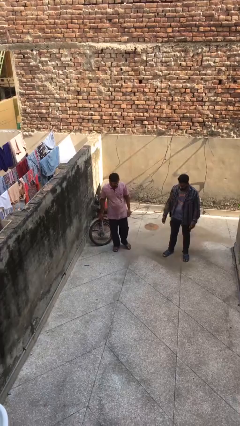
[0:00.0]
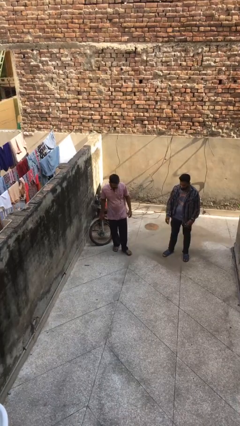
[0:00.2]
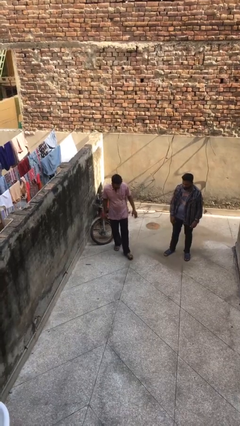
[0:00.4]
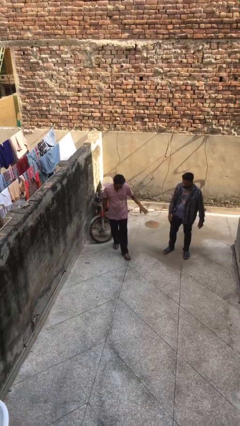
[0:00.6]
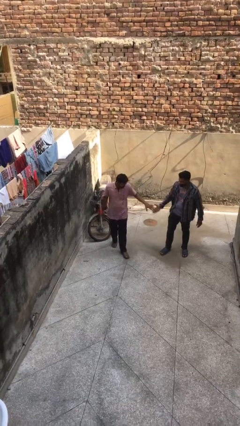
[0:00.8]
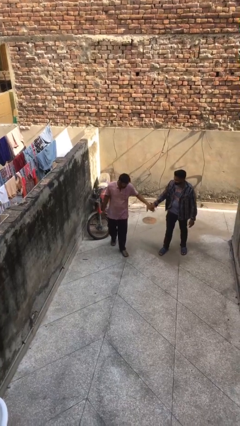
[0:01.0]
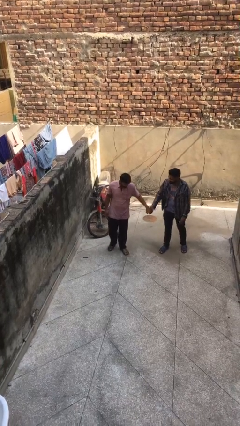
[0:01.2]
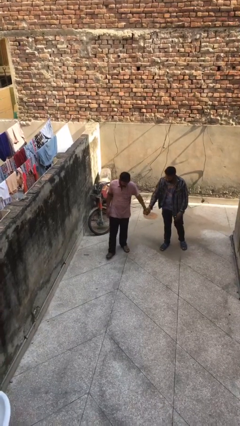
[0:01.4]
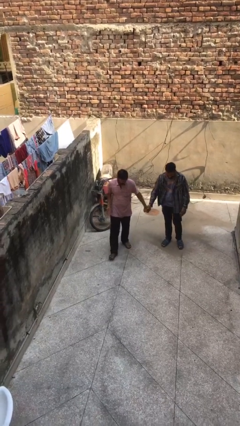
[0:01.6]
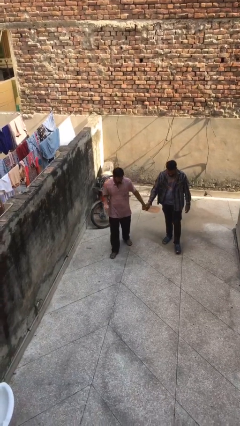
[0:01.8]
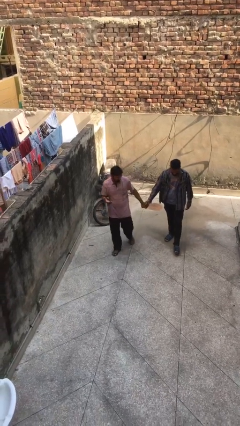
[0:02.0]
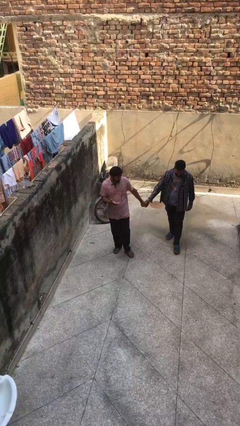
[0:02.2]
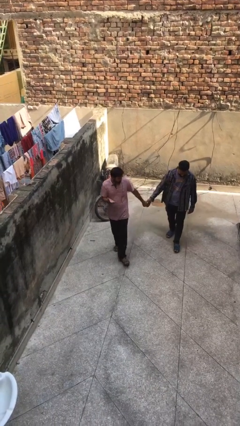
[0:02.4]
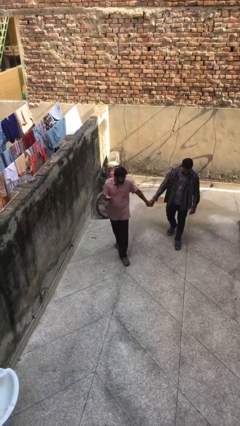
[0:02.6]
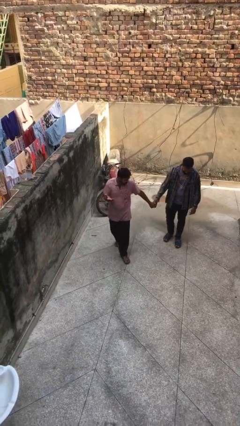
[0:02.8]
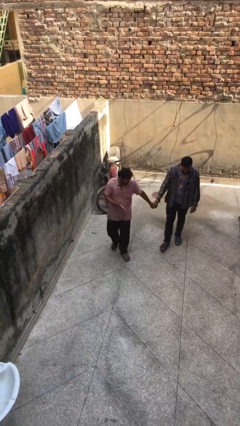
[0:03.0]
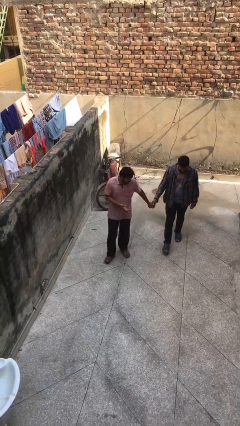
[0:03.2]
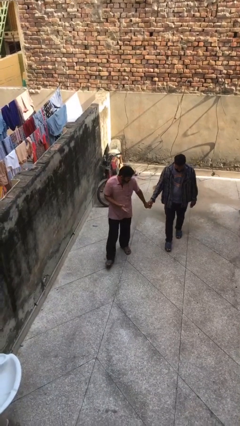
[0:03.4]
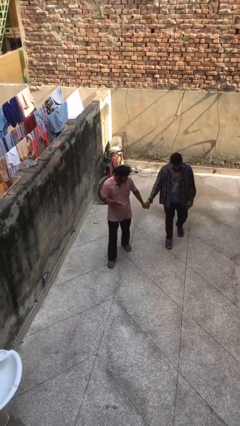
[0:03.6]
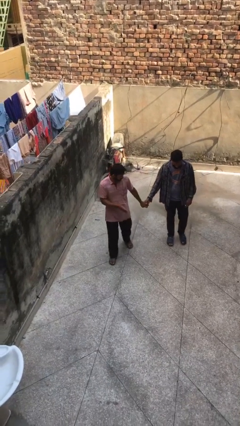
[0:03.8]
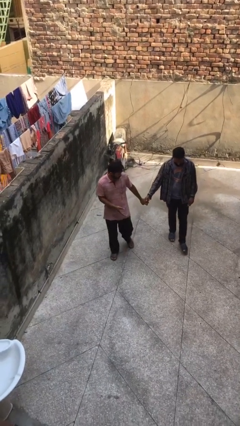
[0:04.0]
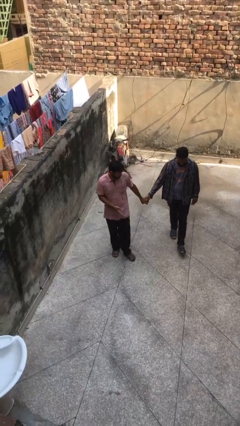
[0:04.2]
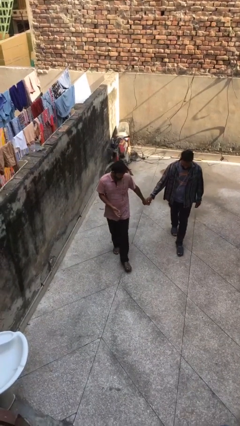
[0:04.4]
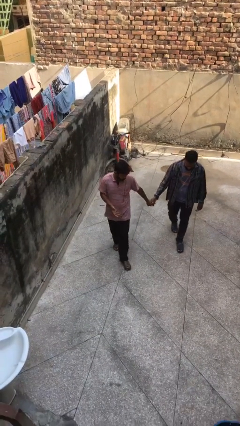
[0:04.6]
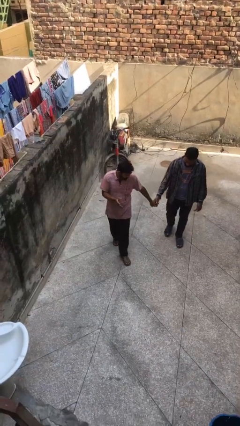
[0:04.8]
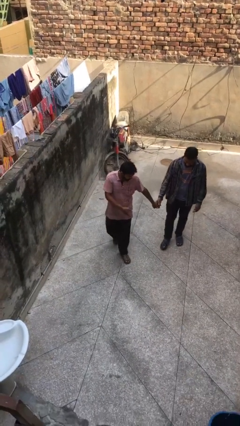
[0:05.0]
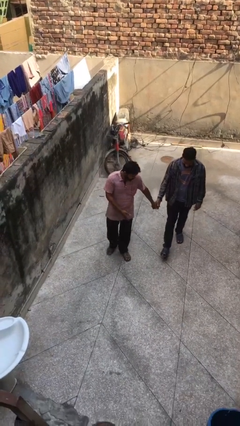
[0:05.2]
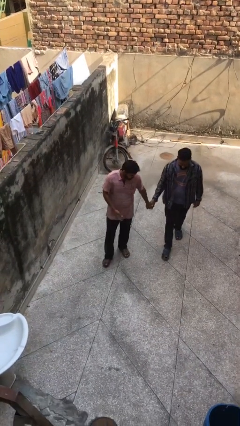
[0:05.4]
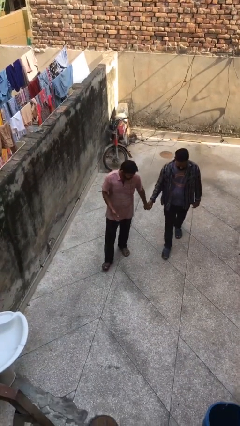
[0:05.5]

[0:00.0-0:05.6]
person holds hand

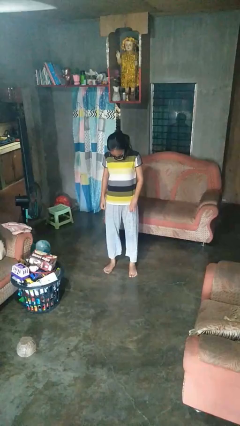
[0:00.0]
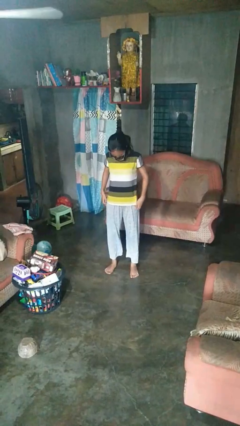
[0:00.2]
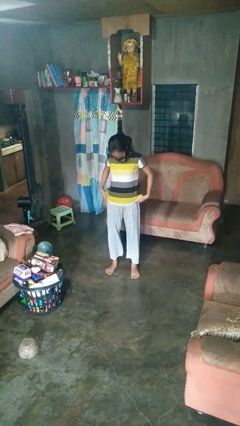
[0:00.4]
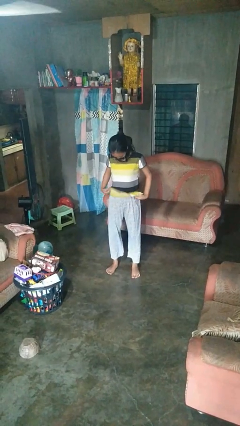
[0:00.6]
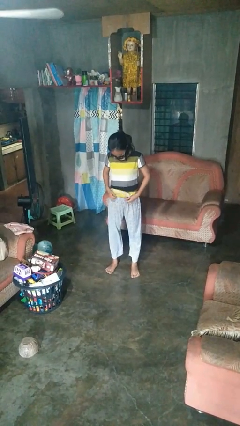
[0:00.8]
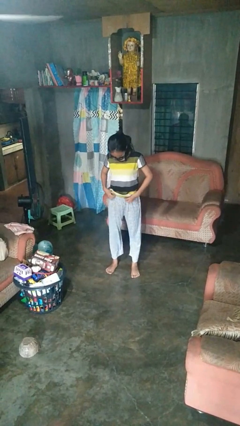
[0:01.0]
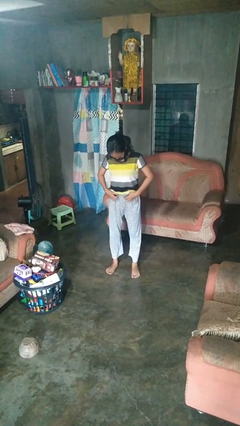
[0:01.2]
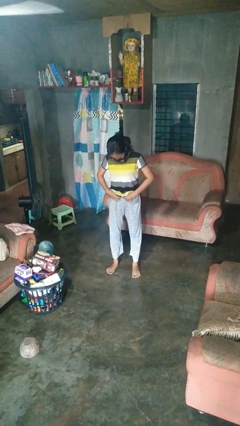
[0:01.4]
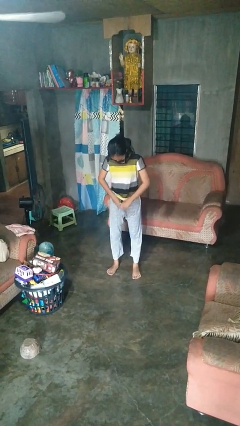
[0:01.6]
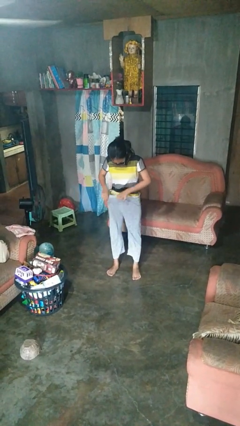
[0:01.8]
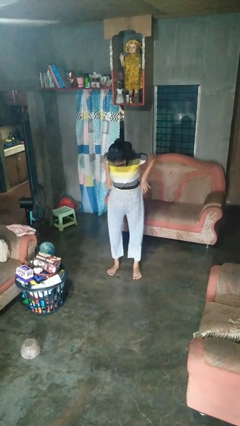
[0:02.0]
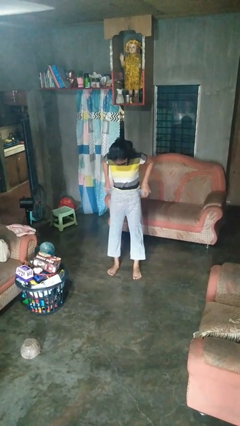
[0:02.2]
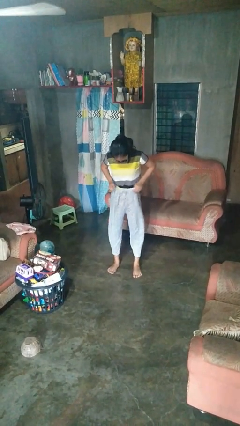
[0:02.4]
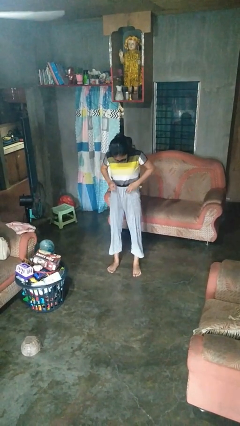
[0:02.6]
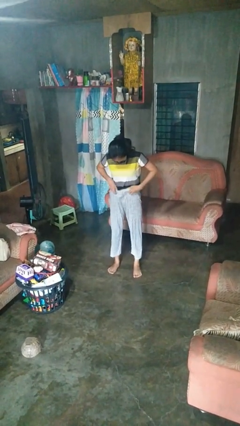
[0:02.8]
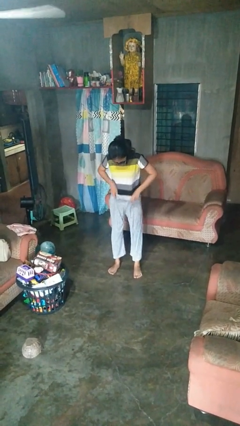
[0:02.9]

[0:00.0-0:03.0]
person tucks in shirt

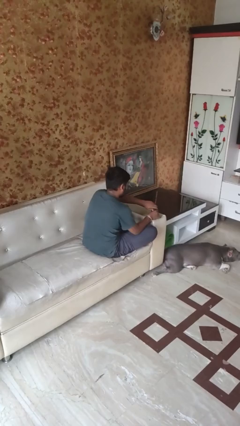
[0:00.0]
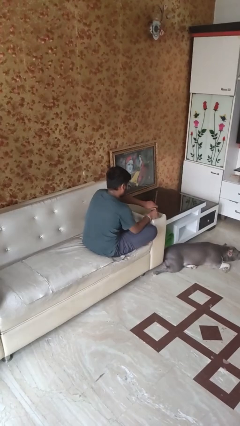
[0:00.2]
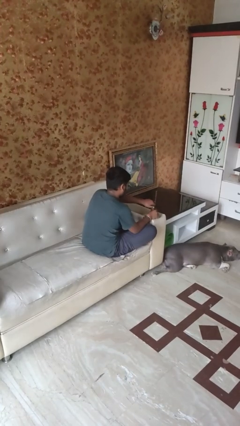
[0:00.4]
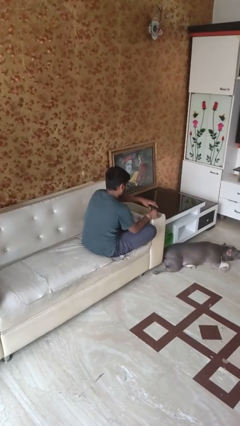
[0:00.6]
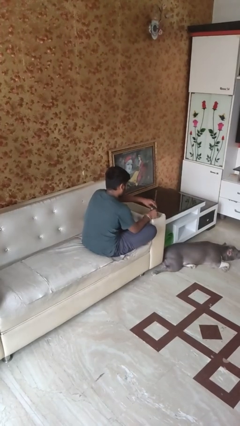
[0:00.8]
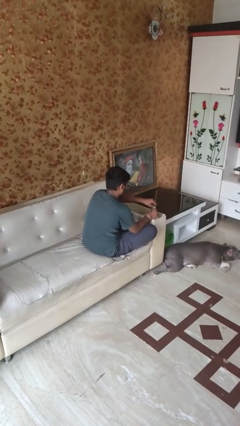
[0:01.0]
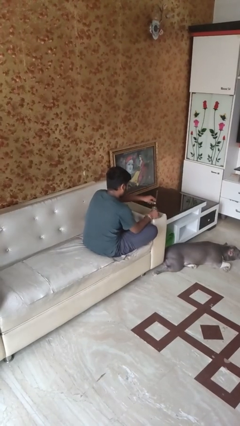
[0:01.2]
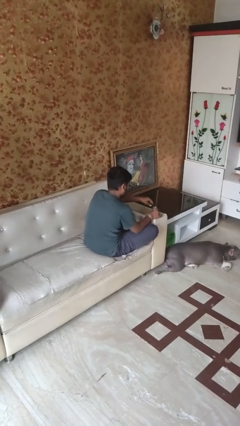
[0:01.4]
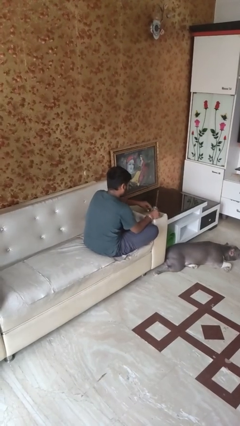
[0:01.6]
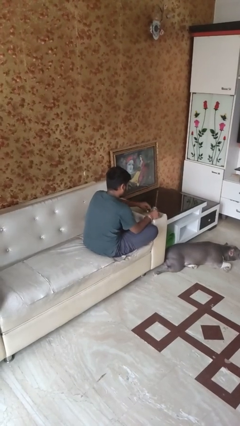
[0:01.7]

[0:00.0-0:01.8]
person opens jar

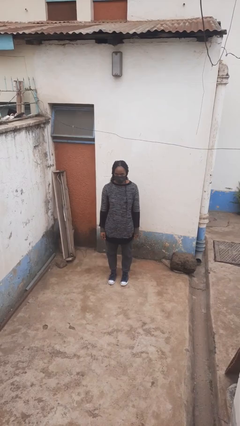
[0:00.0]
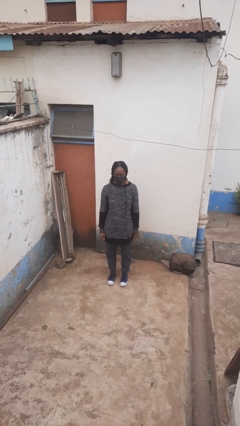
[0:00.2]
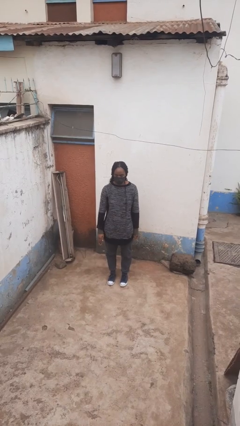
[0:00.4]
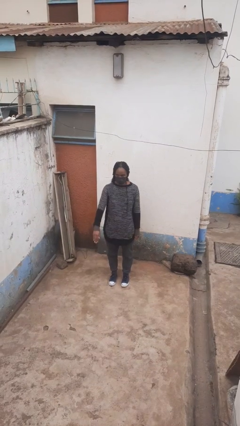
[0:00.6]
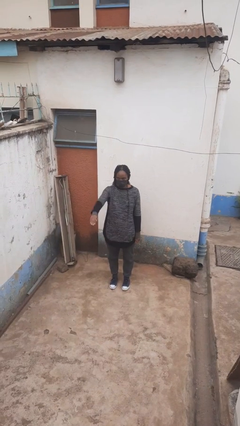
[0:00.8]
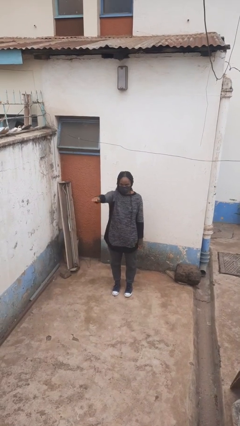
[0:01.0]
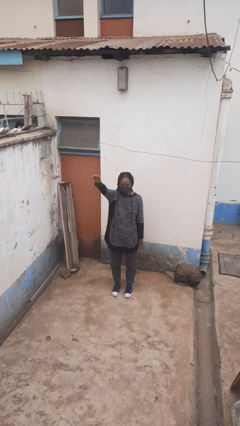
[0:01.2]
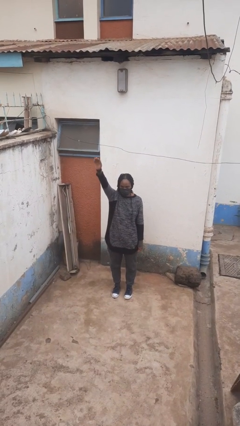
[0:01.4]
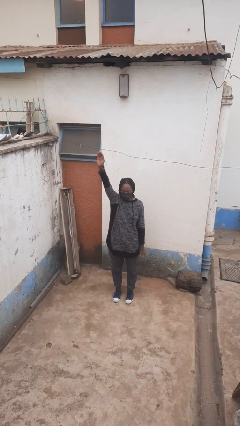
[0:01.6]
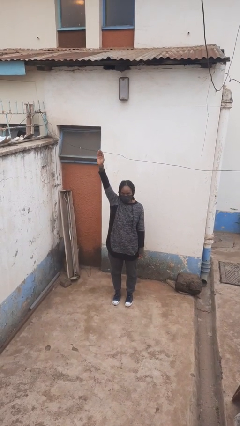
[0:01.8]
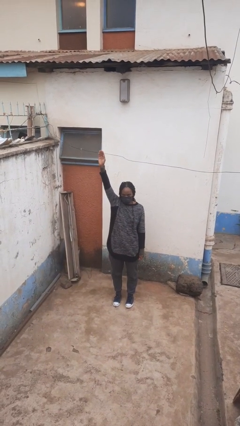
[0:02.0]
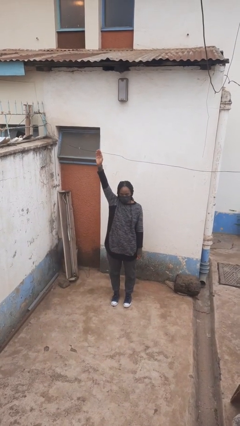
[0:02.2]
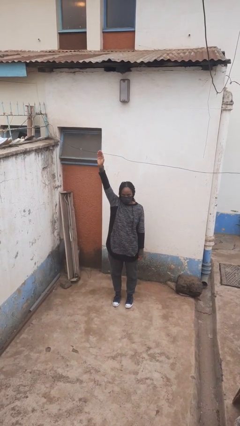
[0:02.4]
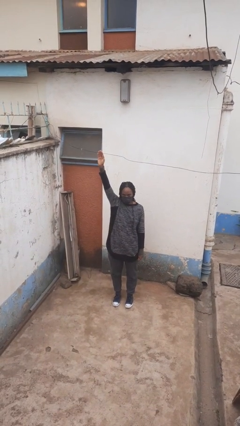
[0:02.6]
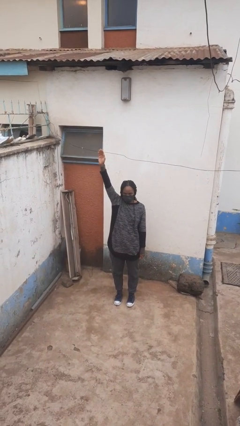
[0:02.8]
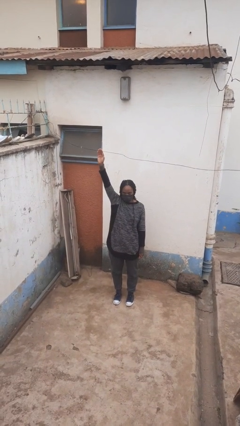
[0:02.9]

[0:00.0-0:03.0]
person gestures raise hand

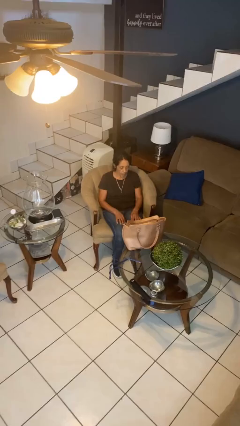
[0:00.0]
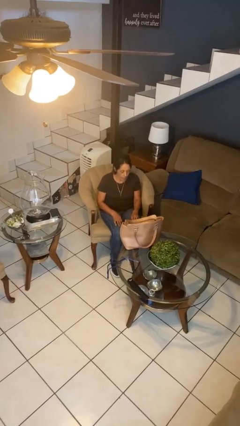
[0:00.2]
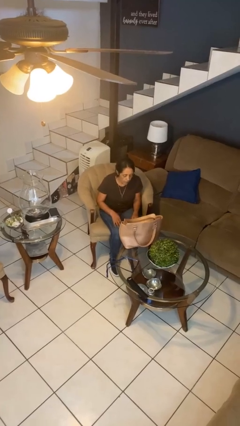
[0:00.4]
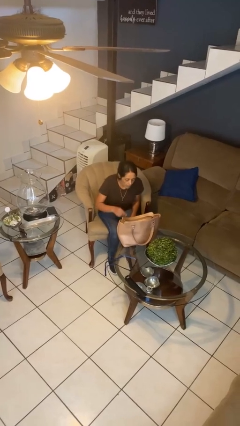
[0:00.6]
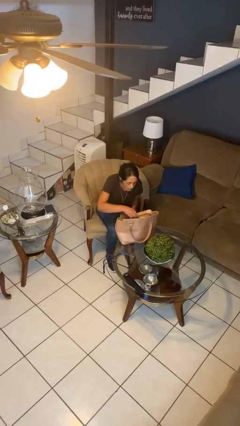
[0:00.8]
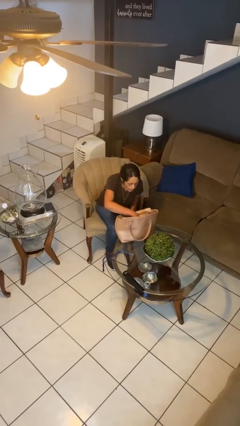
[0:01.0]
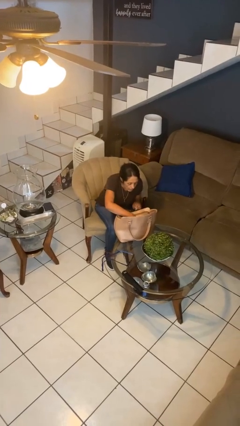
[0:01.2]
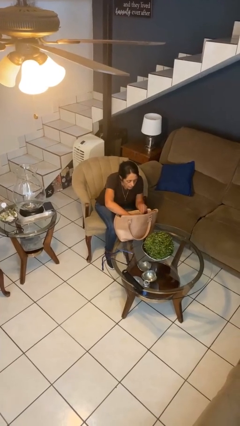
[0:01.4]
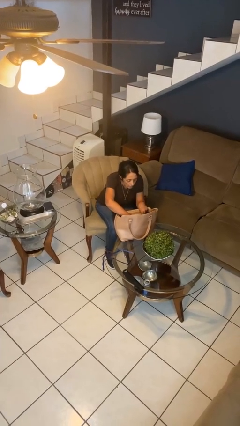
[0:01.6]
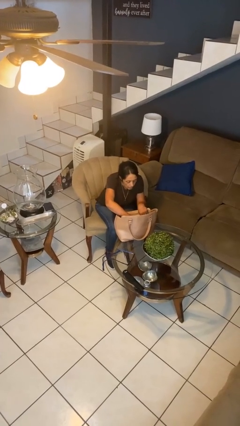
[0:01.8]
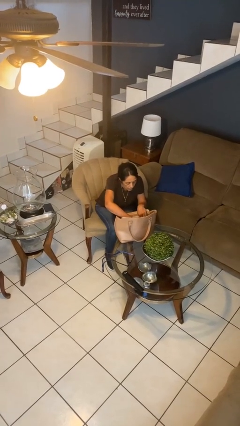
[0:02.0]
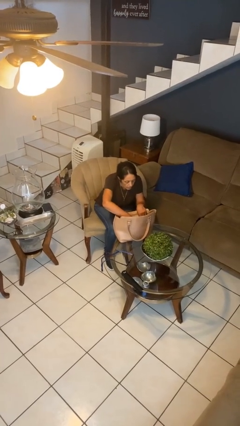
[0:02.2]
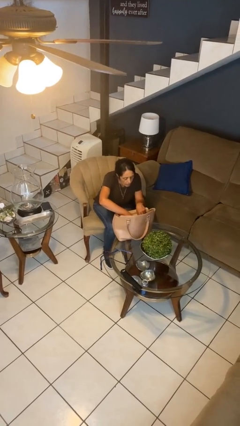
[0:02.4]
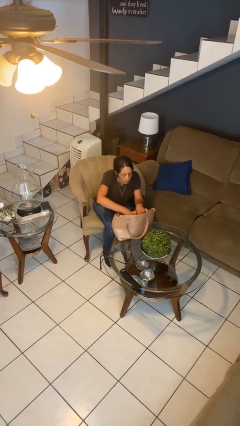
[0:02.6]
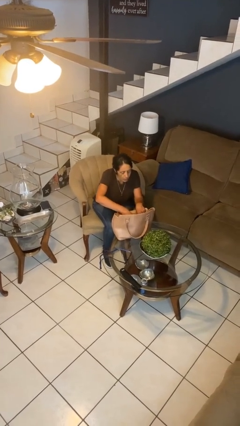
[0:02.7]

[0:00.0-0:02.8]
person searches in purse

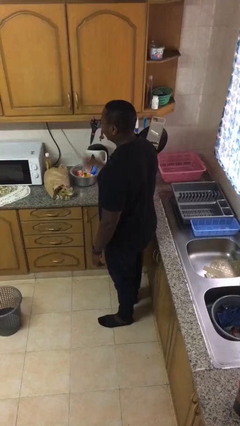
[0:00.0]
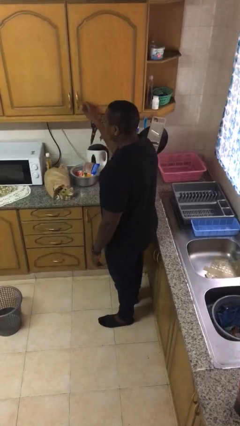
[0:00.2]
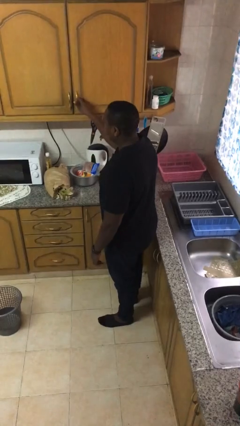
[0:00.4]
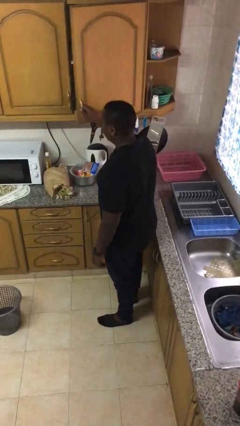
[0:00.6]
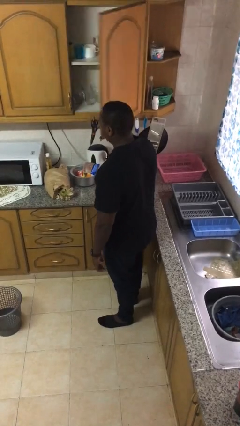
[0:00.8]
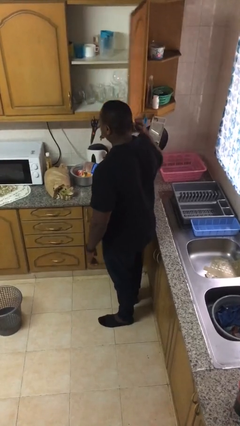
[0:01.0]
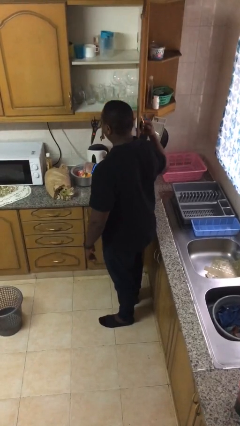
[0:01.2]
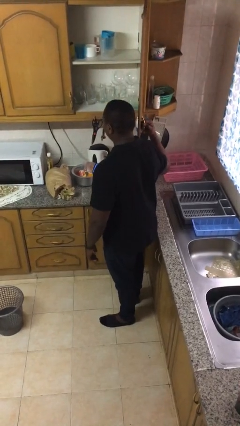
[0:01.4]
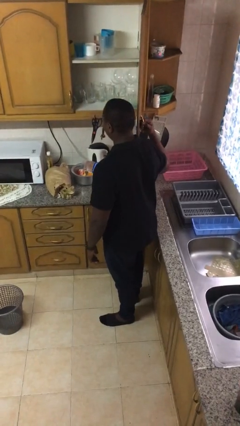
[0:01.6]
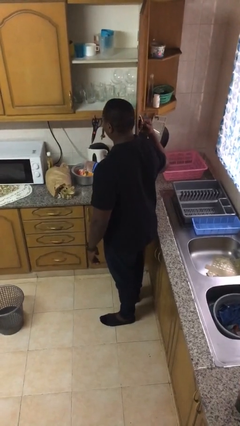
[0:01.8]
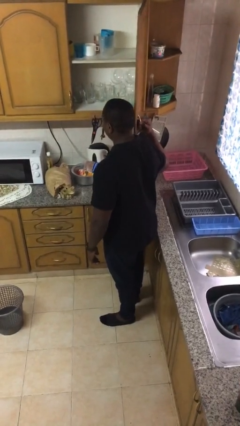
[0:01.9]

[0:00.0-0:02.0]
person opens cabinet
